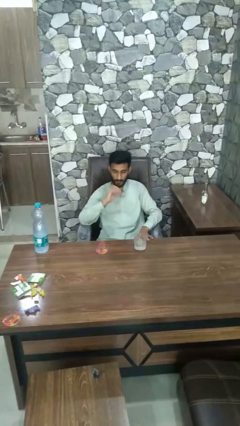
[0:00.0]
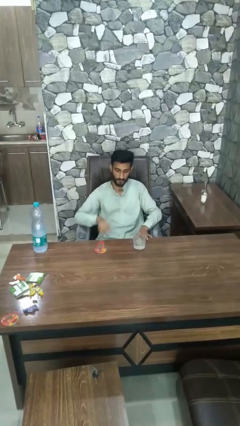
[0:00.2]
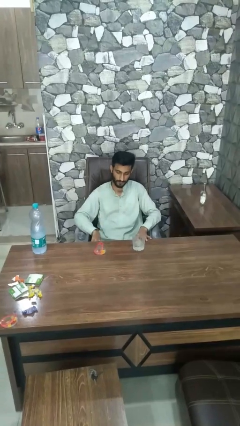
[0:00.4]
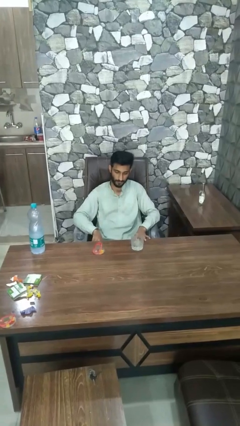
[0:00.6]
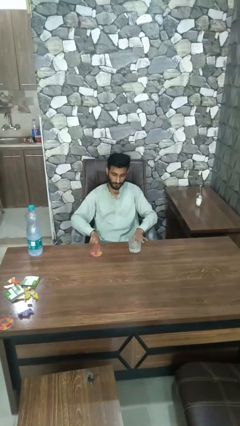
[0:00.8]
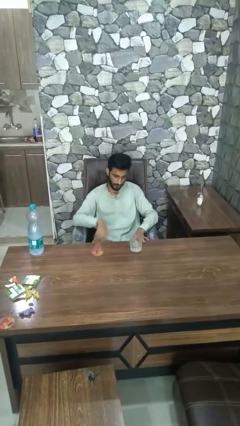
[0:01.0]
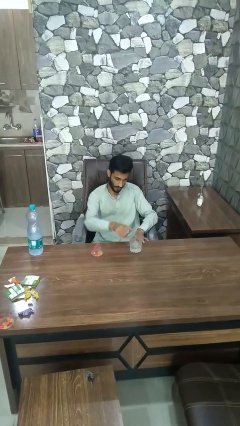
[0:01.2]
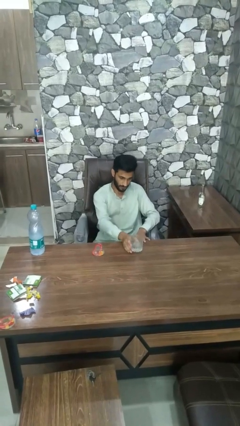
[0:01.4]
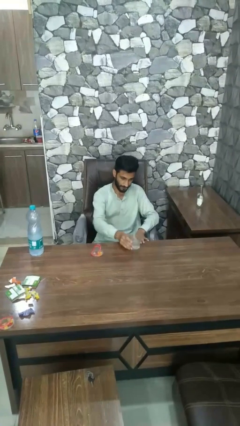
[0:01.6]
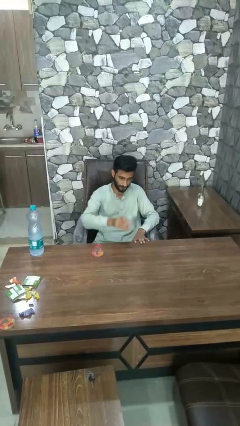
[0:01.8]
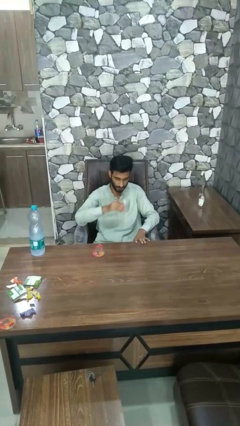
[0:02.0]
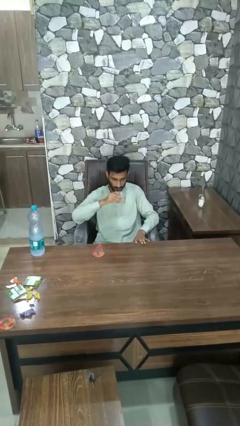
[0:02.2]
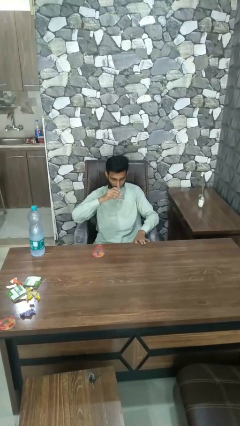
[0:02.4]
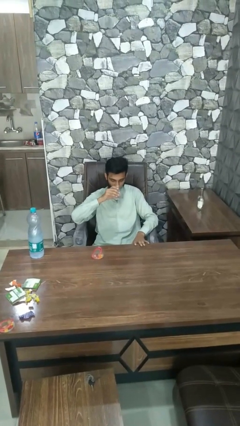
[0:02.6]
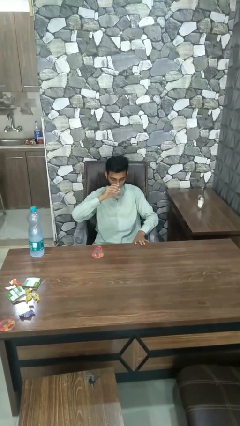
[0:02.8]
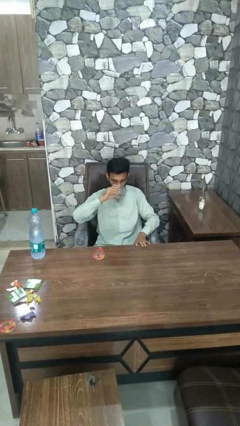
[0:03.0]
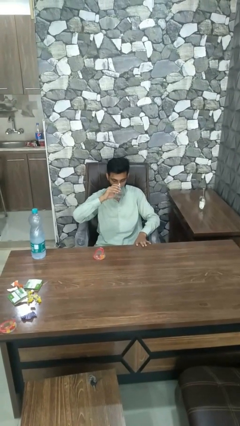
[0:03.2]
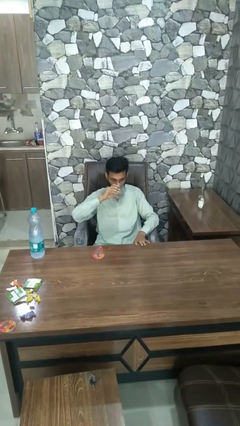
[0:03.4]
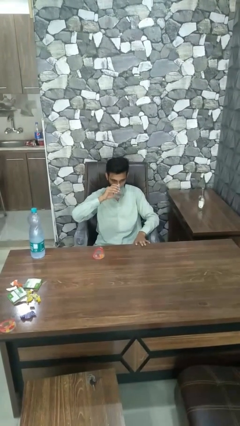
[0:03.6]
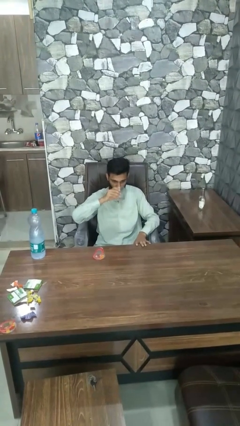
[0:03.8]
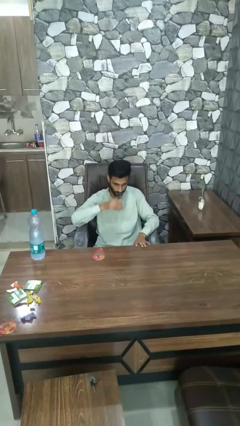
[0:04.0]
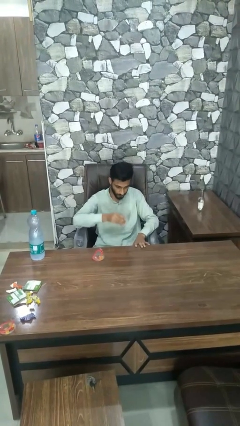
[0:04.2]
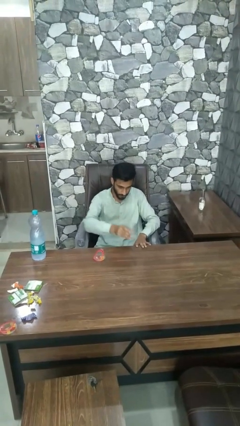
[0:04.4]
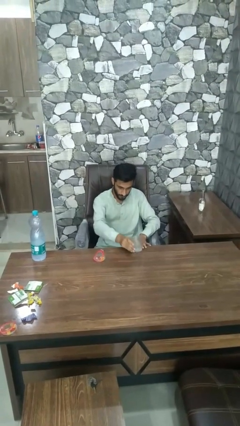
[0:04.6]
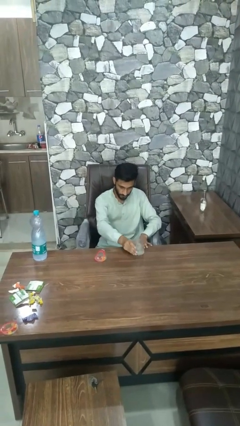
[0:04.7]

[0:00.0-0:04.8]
person drinks from cup

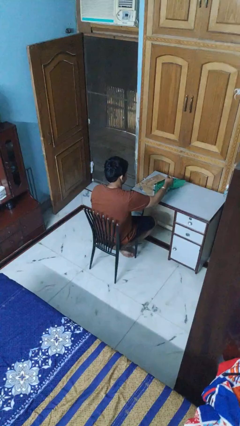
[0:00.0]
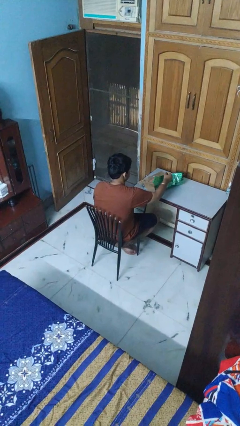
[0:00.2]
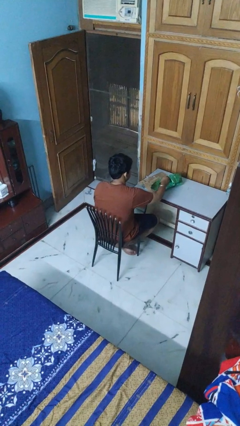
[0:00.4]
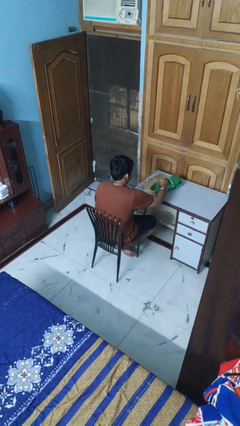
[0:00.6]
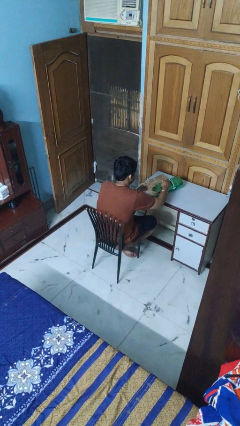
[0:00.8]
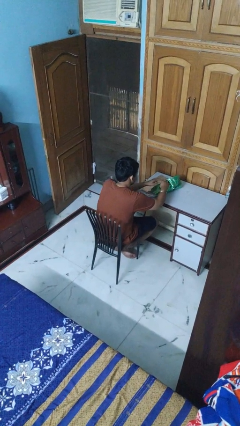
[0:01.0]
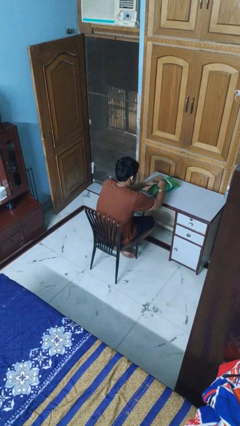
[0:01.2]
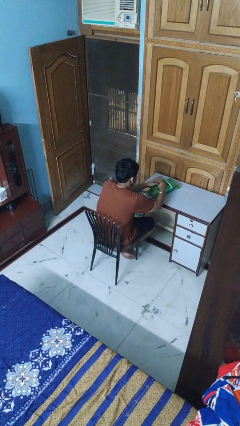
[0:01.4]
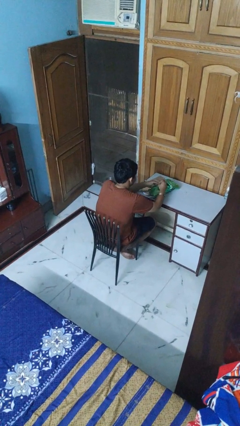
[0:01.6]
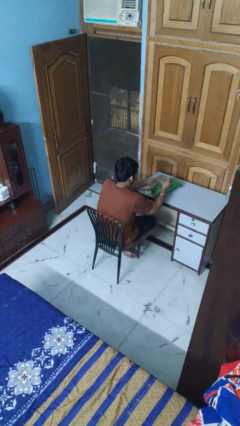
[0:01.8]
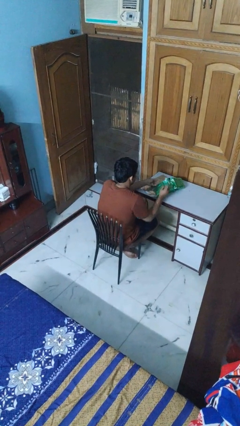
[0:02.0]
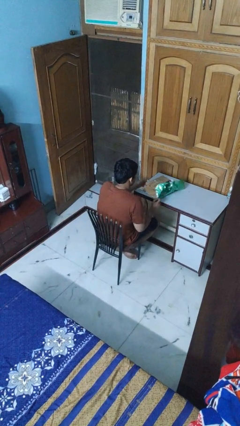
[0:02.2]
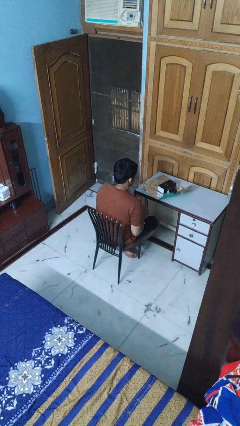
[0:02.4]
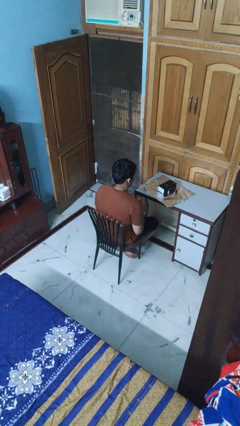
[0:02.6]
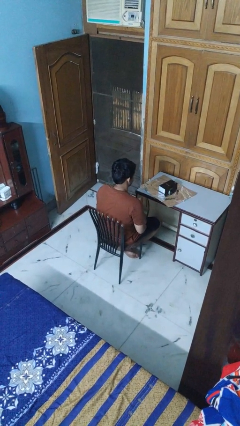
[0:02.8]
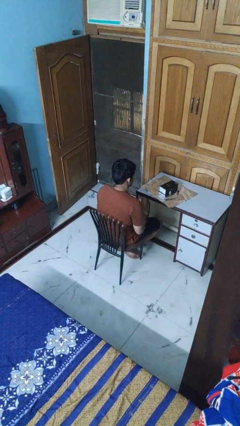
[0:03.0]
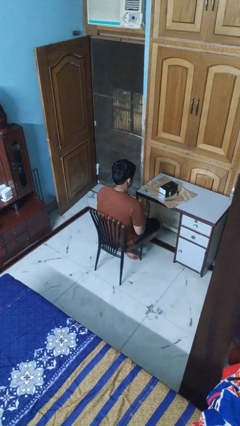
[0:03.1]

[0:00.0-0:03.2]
person wraps box

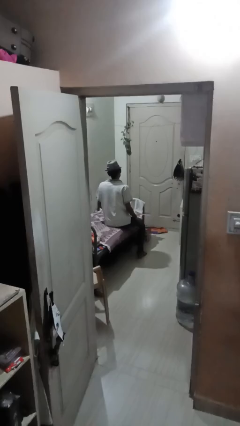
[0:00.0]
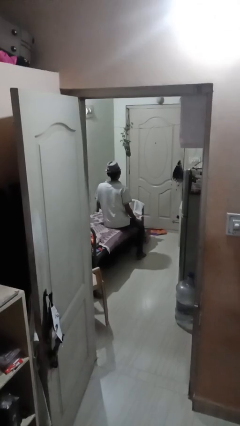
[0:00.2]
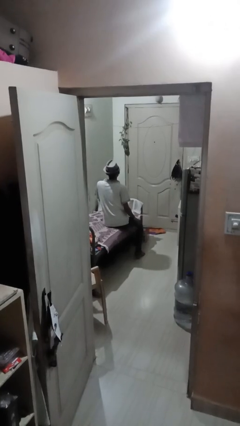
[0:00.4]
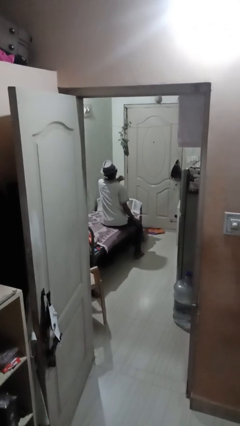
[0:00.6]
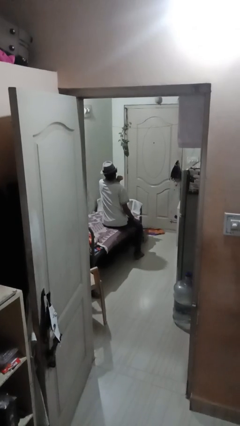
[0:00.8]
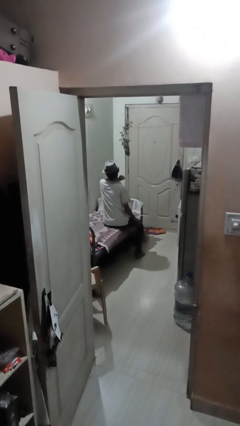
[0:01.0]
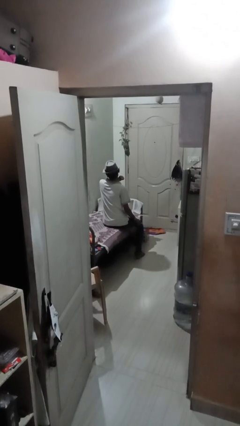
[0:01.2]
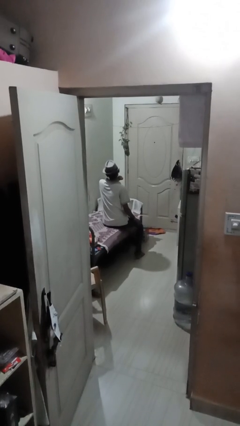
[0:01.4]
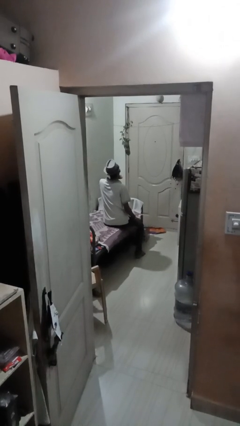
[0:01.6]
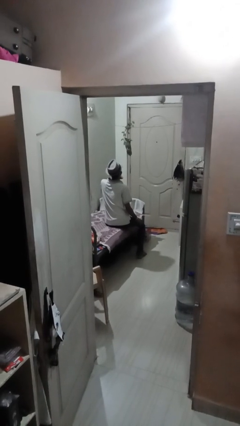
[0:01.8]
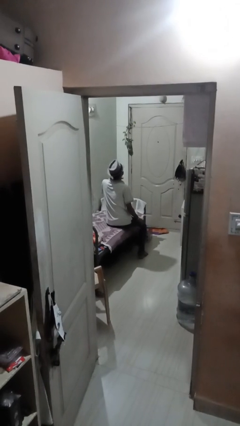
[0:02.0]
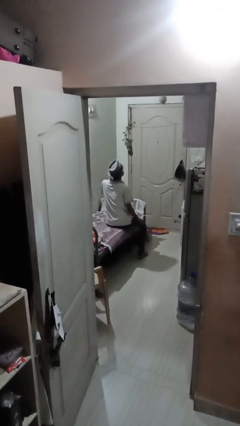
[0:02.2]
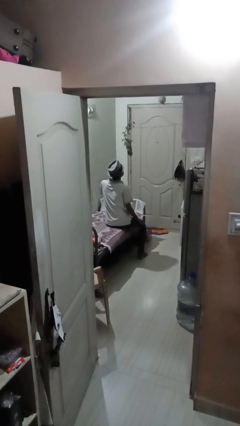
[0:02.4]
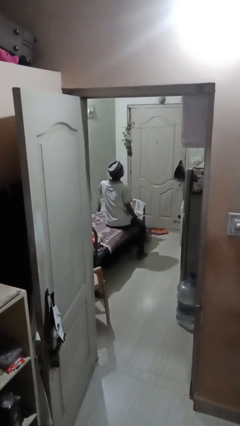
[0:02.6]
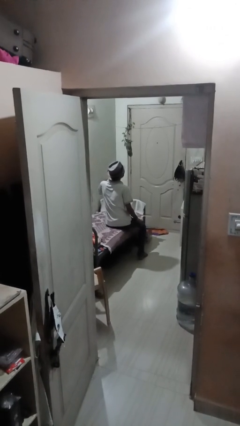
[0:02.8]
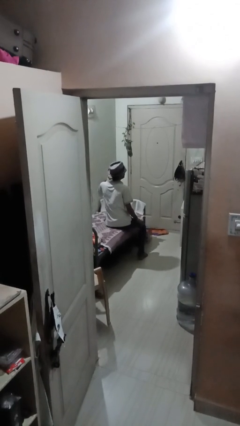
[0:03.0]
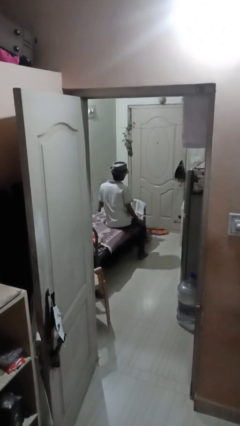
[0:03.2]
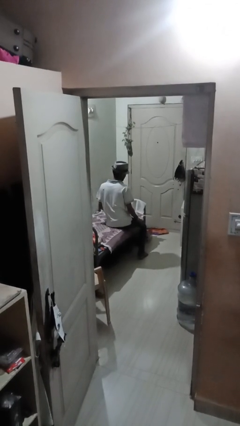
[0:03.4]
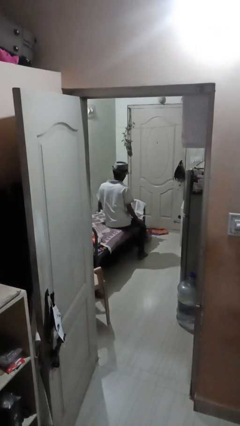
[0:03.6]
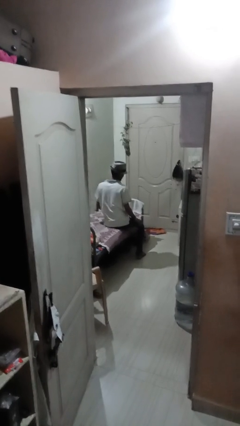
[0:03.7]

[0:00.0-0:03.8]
person gestures cut

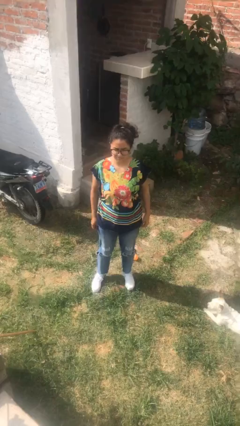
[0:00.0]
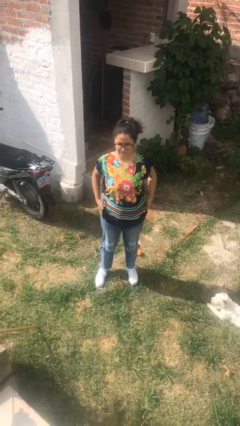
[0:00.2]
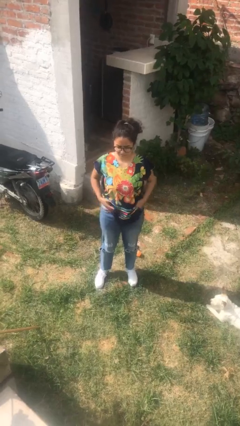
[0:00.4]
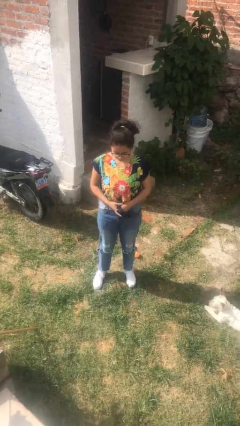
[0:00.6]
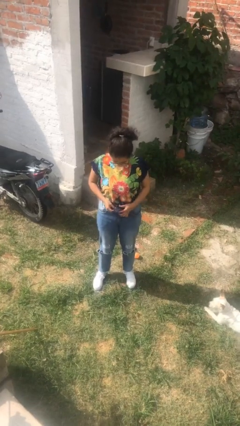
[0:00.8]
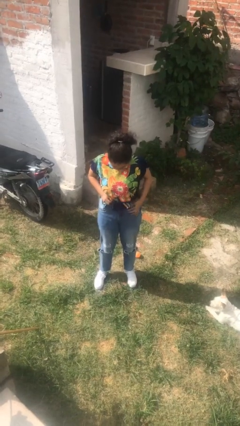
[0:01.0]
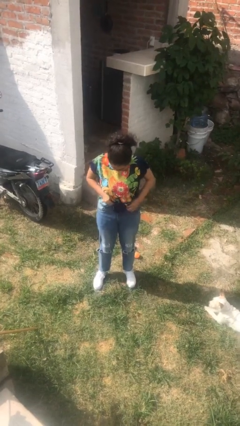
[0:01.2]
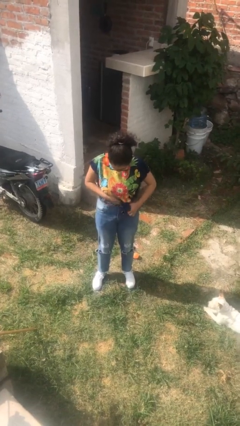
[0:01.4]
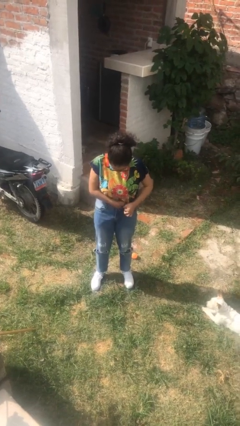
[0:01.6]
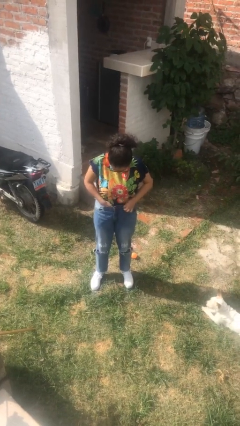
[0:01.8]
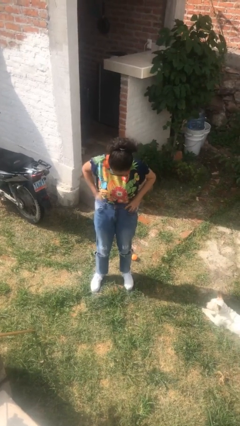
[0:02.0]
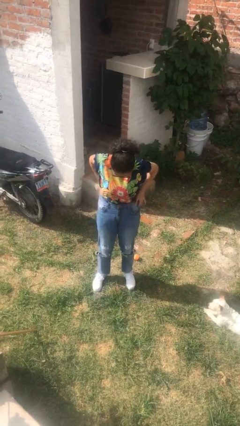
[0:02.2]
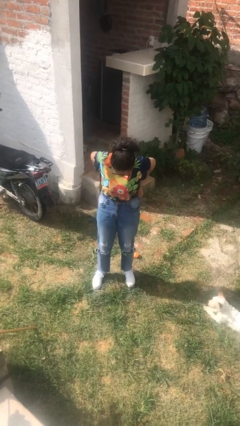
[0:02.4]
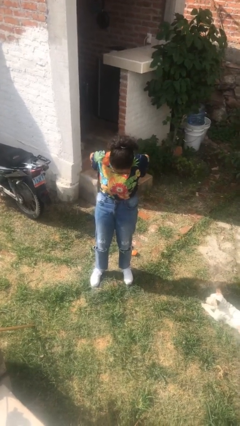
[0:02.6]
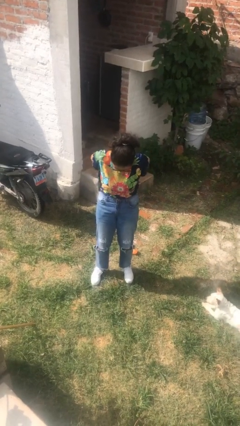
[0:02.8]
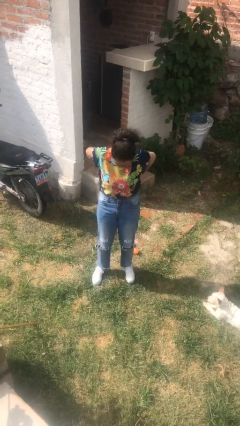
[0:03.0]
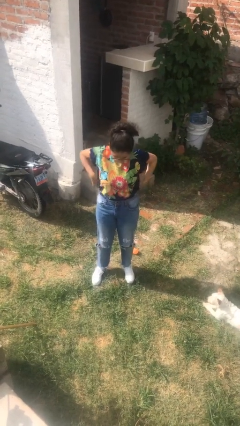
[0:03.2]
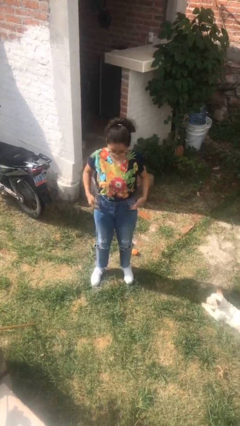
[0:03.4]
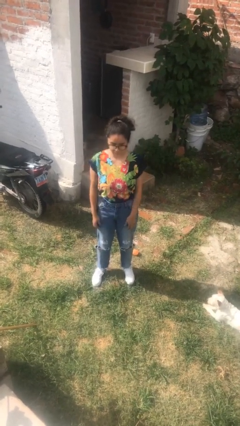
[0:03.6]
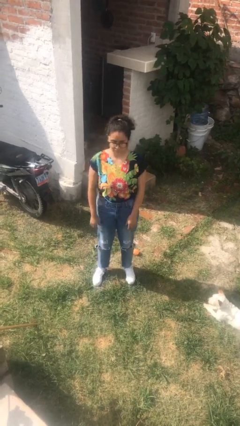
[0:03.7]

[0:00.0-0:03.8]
person tucks in shirt

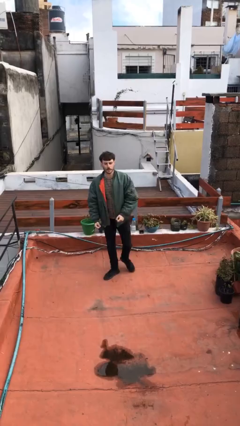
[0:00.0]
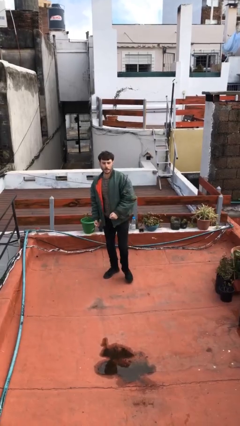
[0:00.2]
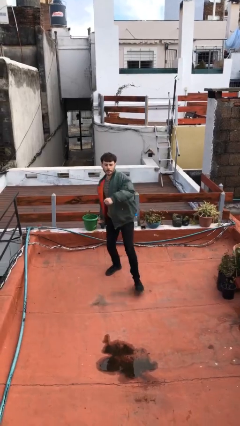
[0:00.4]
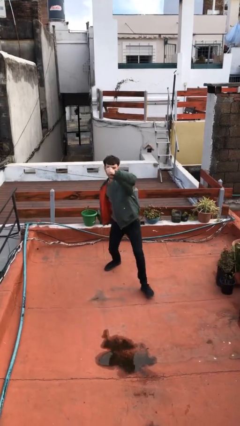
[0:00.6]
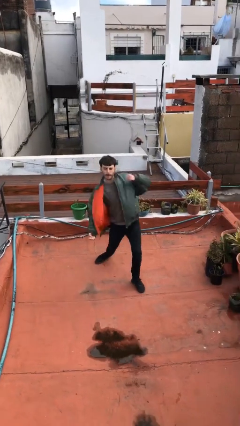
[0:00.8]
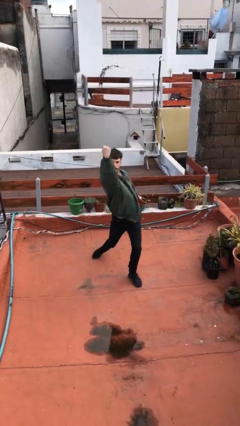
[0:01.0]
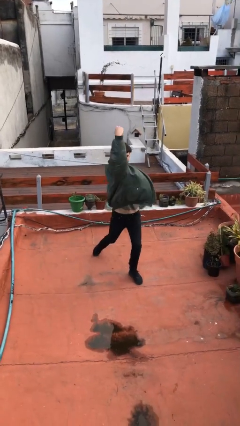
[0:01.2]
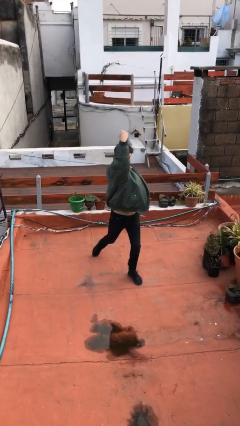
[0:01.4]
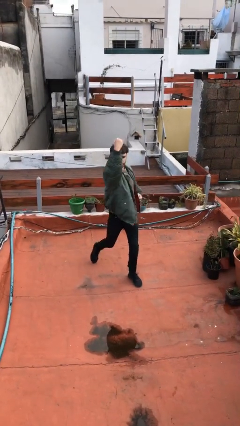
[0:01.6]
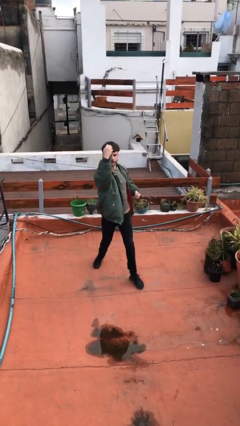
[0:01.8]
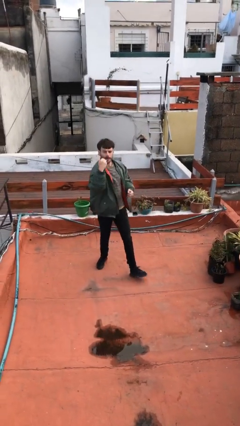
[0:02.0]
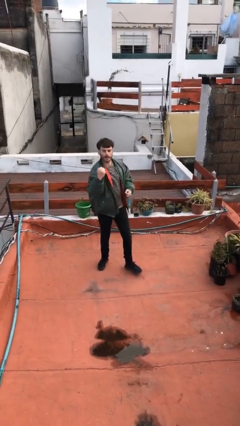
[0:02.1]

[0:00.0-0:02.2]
person punches
